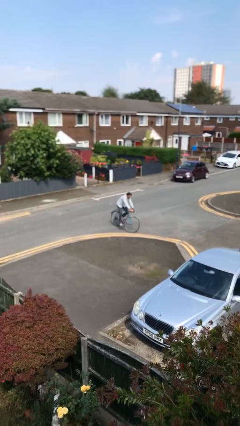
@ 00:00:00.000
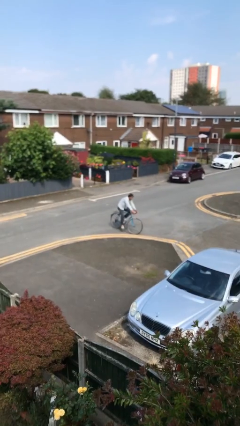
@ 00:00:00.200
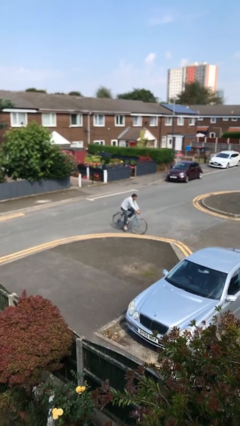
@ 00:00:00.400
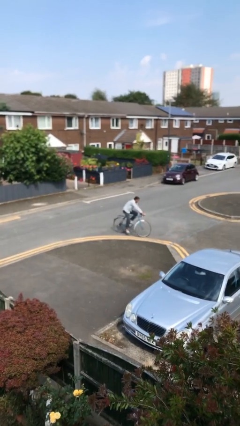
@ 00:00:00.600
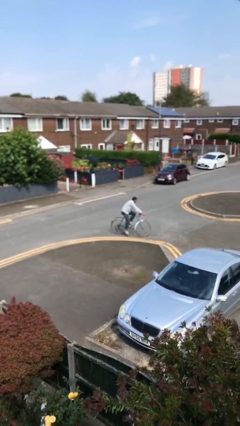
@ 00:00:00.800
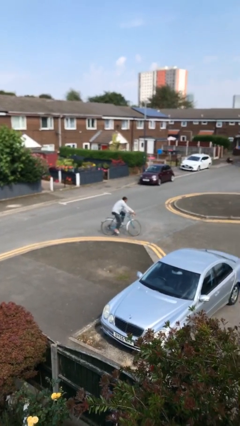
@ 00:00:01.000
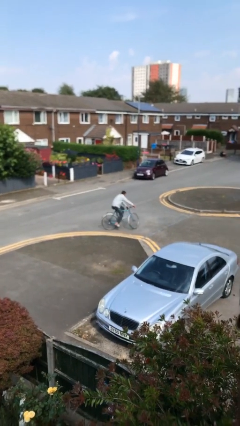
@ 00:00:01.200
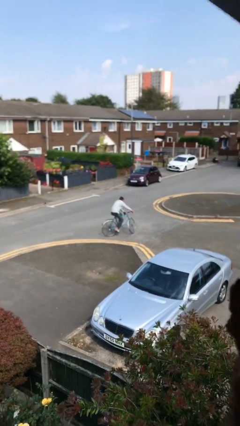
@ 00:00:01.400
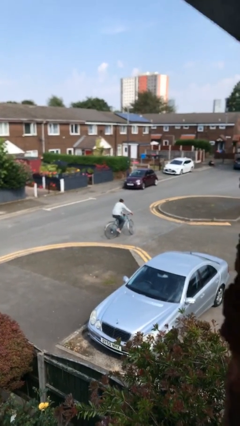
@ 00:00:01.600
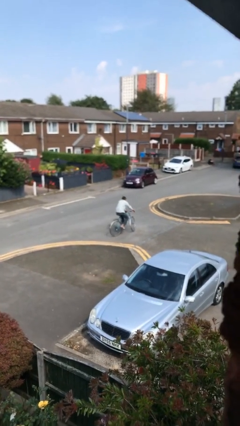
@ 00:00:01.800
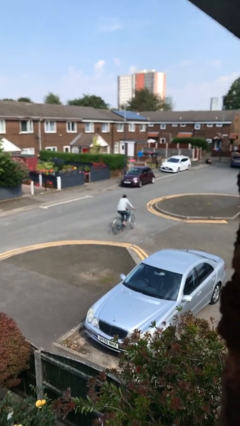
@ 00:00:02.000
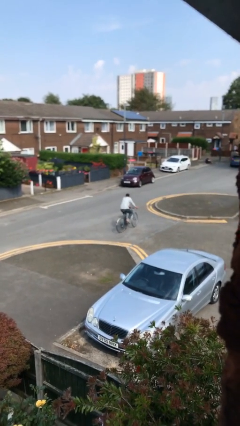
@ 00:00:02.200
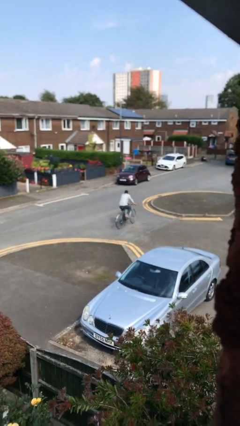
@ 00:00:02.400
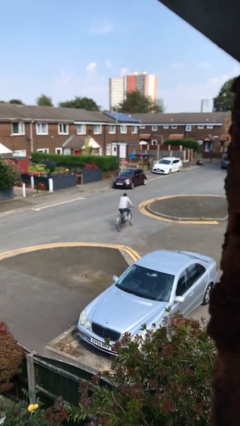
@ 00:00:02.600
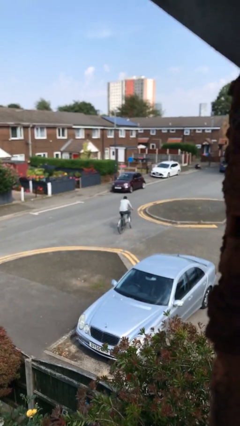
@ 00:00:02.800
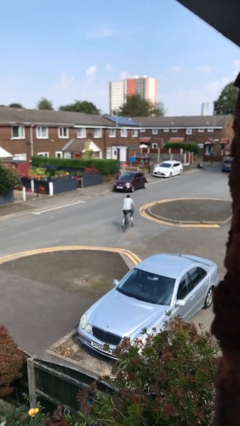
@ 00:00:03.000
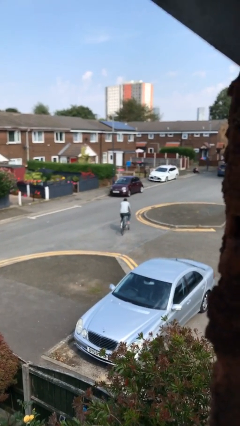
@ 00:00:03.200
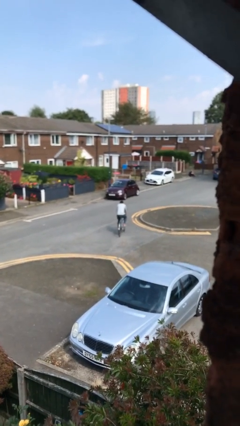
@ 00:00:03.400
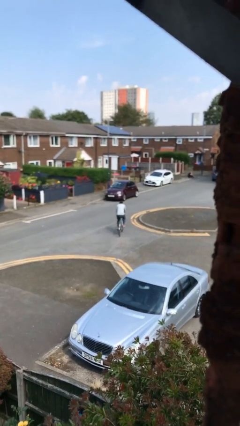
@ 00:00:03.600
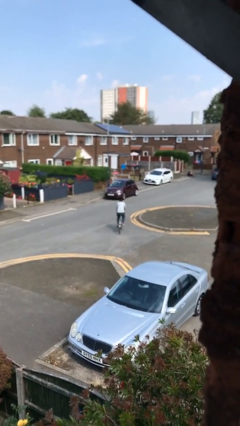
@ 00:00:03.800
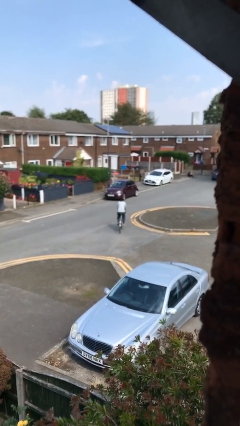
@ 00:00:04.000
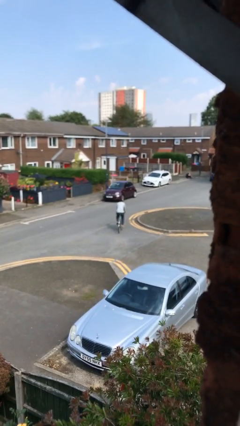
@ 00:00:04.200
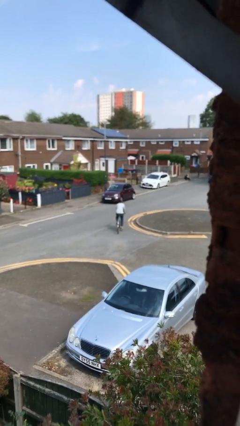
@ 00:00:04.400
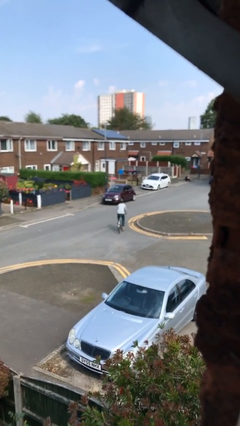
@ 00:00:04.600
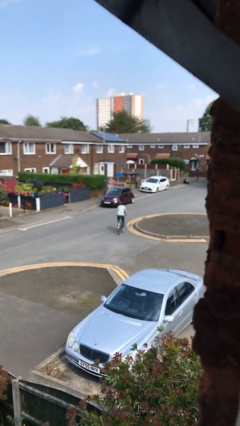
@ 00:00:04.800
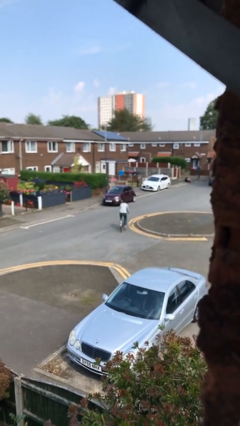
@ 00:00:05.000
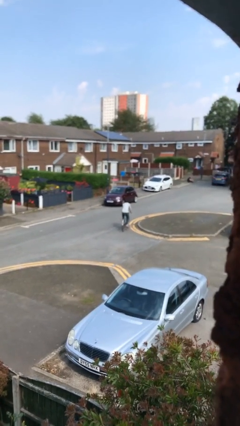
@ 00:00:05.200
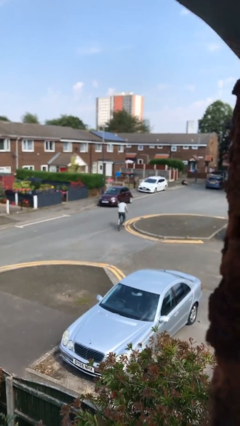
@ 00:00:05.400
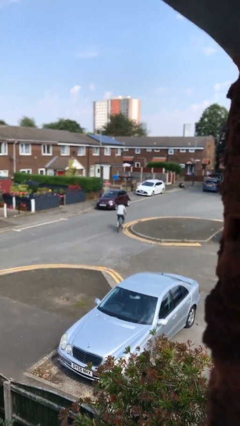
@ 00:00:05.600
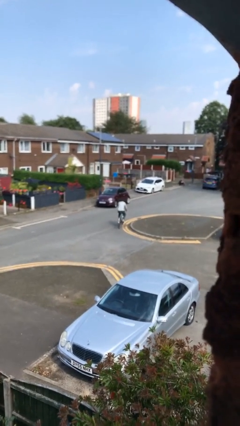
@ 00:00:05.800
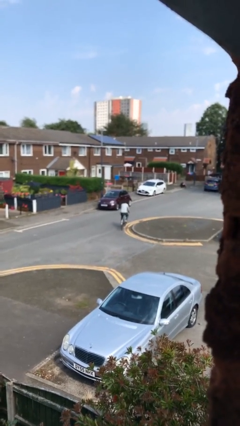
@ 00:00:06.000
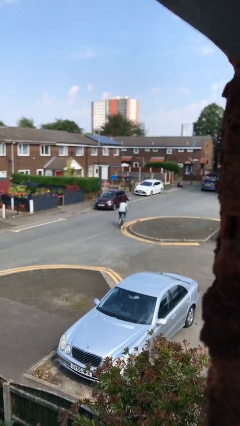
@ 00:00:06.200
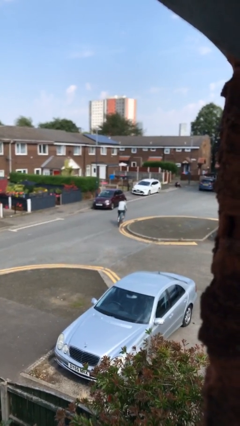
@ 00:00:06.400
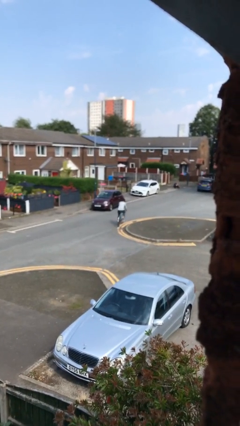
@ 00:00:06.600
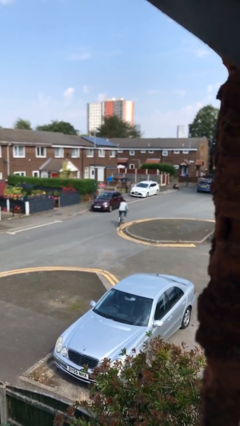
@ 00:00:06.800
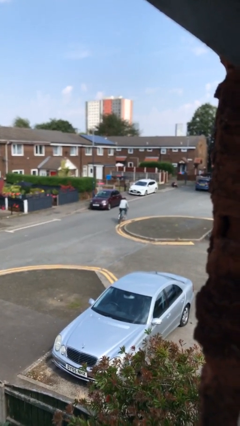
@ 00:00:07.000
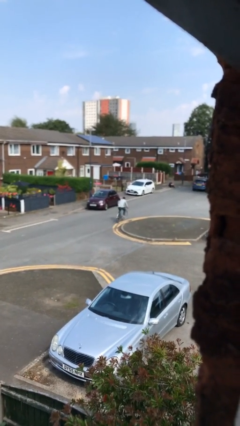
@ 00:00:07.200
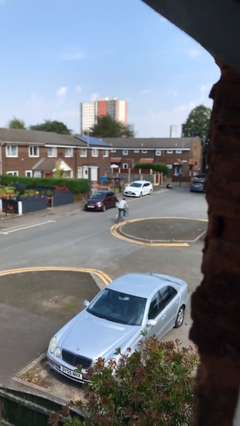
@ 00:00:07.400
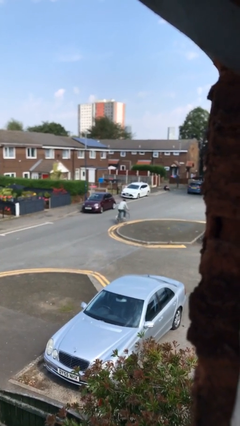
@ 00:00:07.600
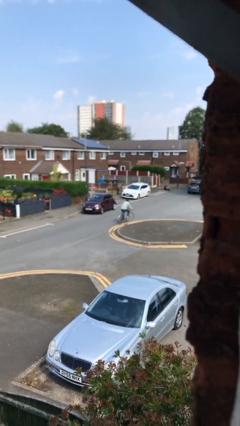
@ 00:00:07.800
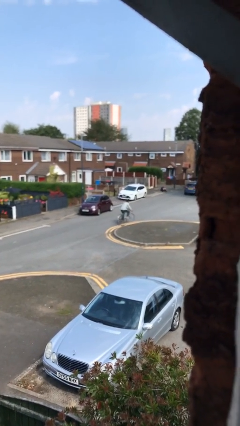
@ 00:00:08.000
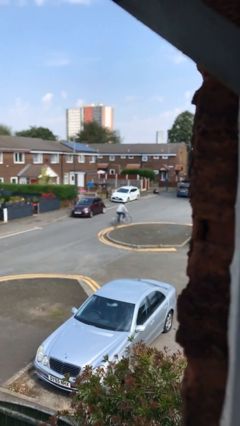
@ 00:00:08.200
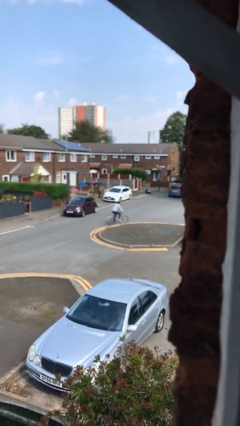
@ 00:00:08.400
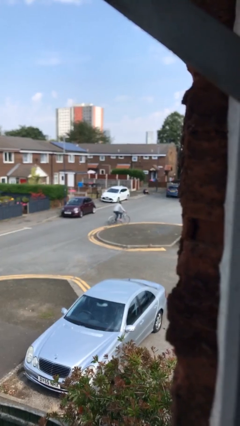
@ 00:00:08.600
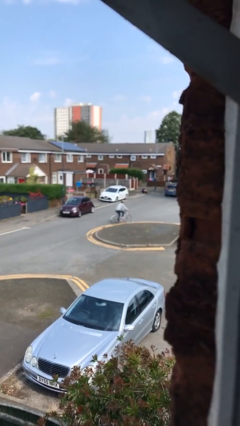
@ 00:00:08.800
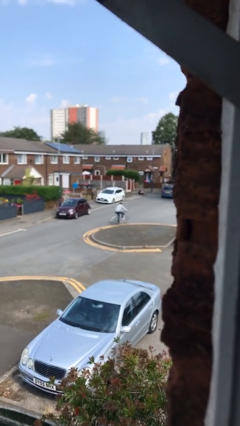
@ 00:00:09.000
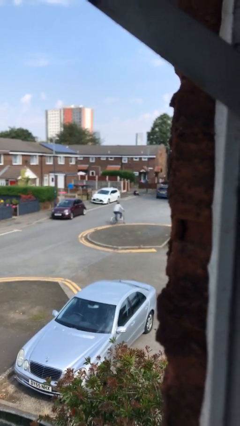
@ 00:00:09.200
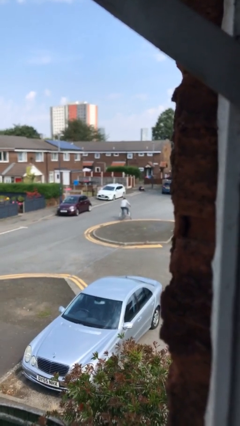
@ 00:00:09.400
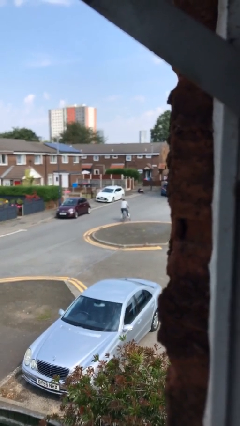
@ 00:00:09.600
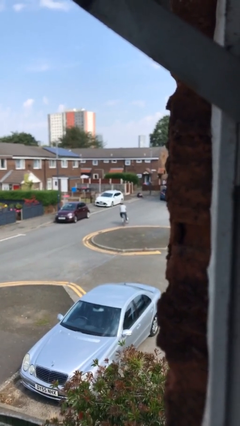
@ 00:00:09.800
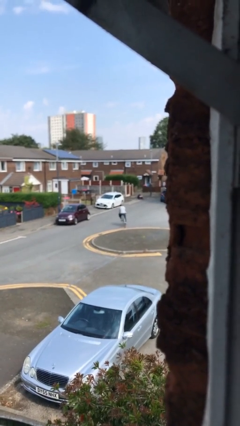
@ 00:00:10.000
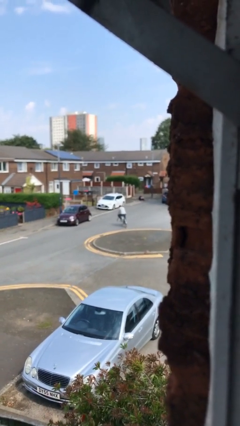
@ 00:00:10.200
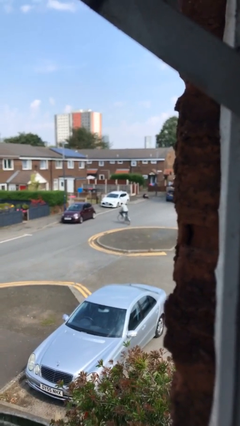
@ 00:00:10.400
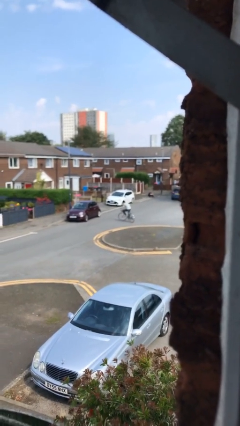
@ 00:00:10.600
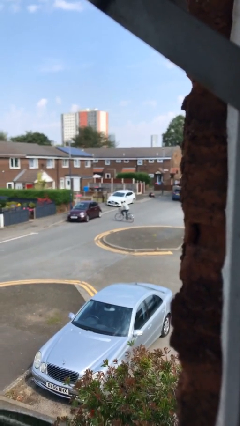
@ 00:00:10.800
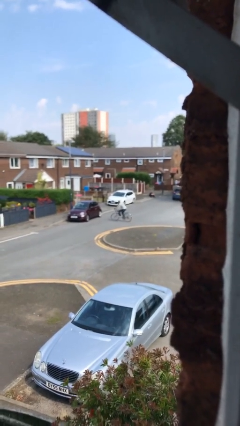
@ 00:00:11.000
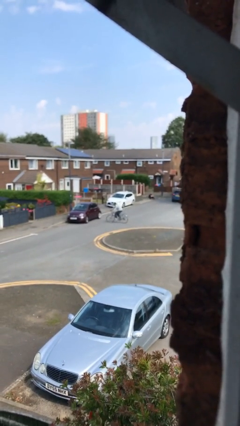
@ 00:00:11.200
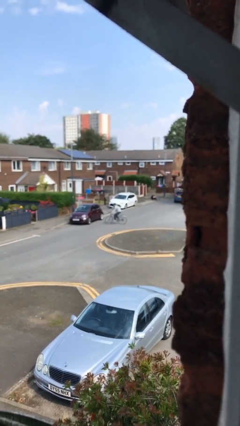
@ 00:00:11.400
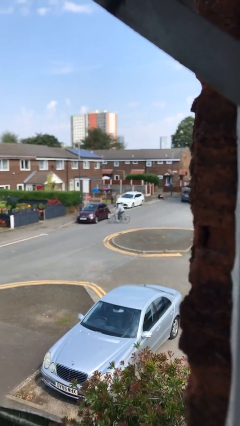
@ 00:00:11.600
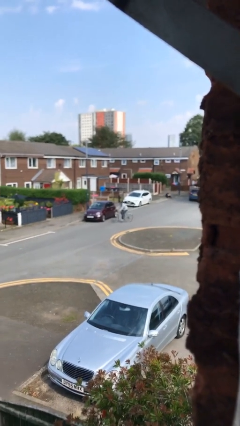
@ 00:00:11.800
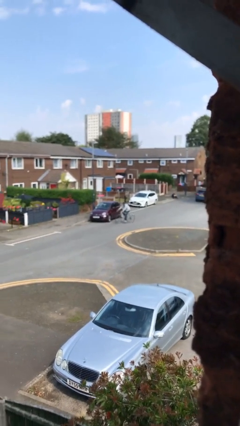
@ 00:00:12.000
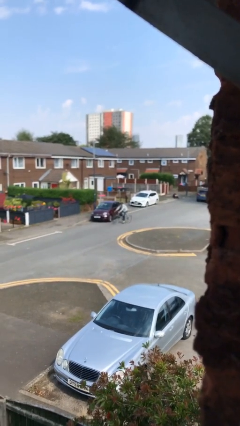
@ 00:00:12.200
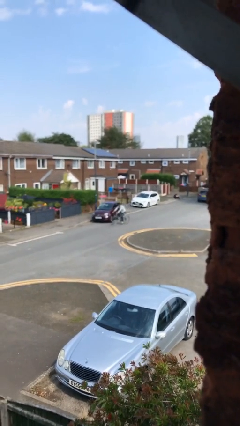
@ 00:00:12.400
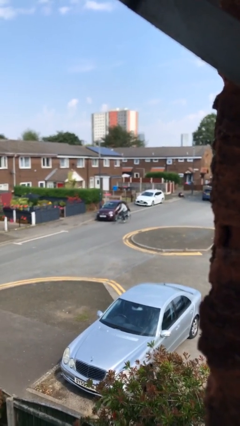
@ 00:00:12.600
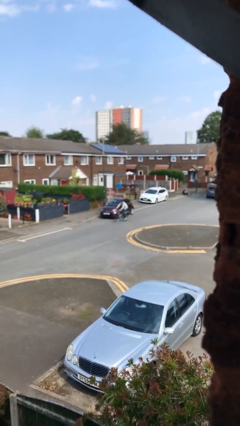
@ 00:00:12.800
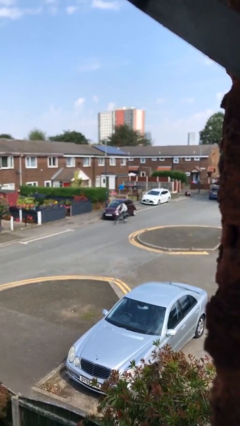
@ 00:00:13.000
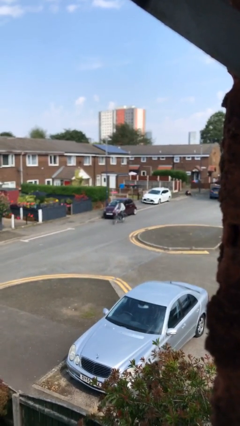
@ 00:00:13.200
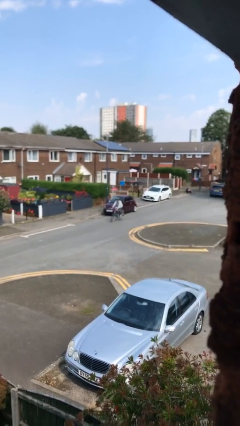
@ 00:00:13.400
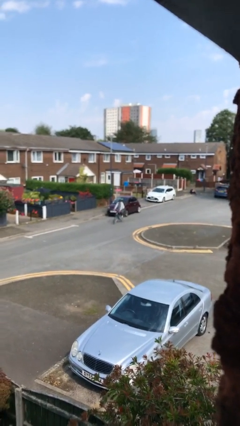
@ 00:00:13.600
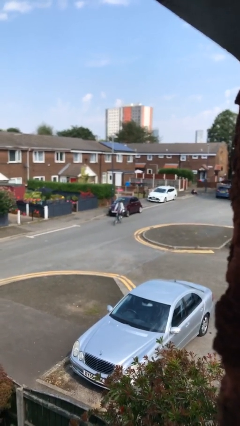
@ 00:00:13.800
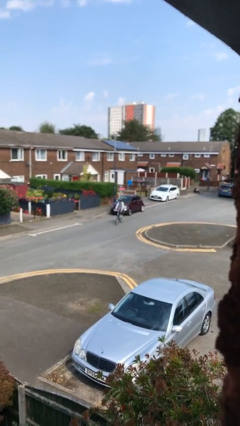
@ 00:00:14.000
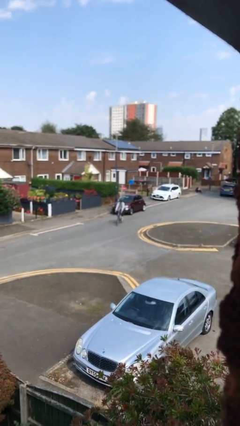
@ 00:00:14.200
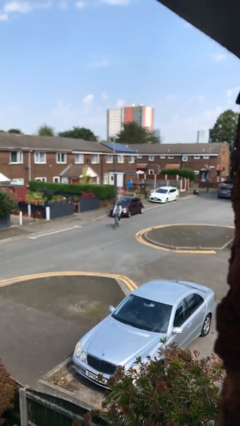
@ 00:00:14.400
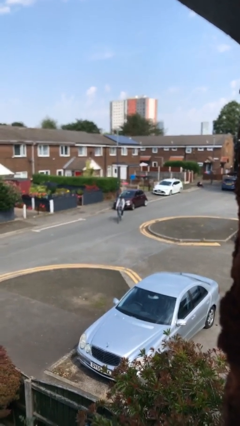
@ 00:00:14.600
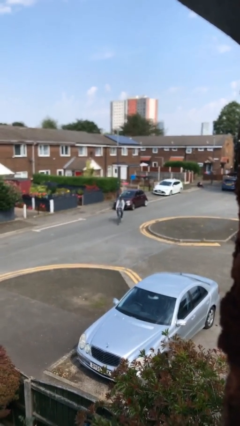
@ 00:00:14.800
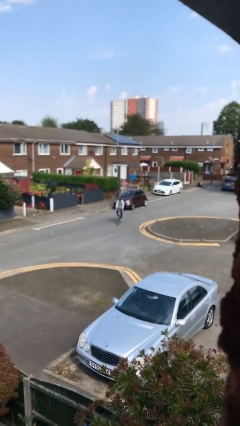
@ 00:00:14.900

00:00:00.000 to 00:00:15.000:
person rides bicycle

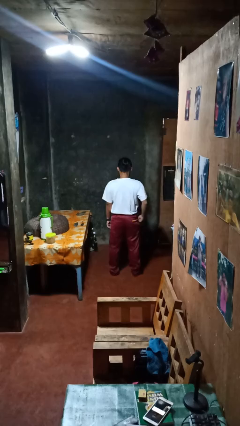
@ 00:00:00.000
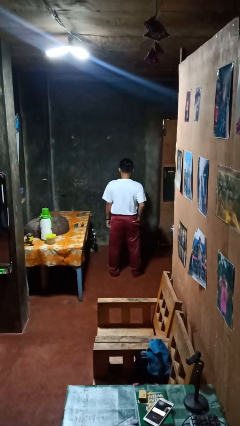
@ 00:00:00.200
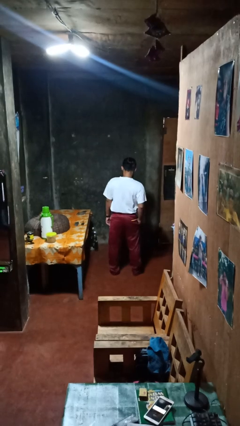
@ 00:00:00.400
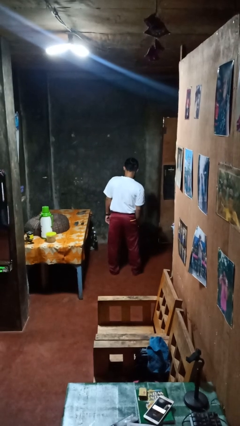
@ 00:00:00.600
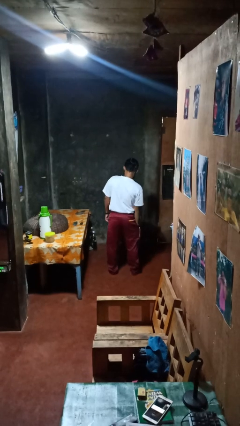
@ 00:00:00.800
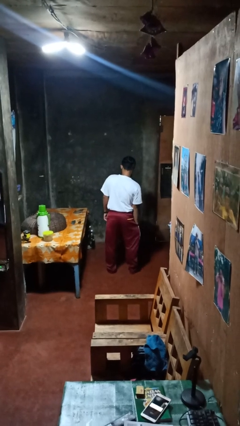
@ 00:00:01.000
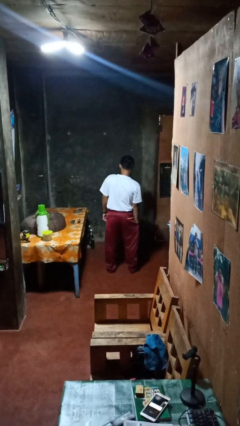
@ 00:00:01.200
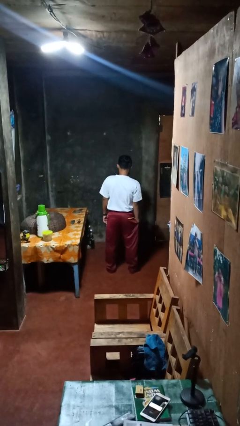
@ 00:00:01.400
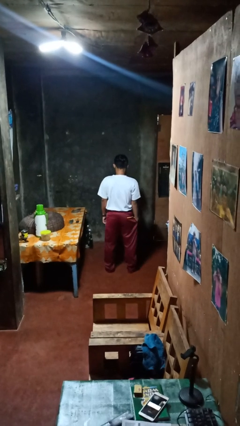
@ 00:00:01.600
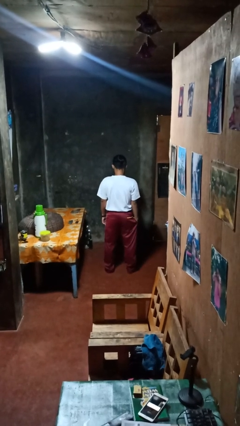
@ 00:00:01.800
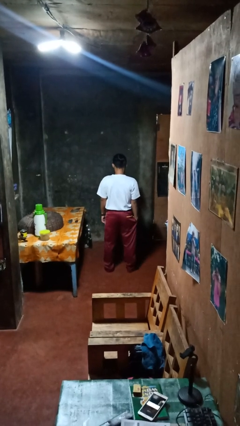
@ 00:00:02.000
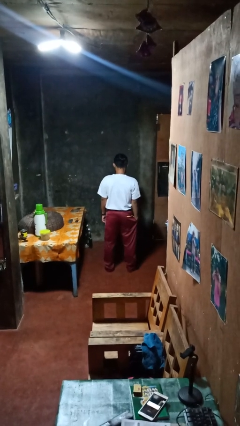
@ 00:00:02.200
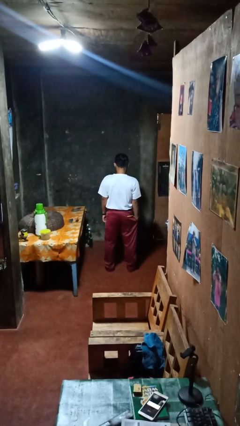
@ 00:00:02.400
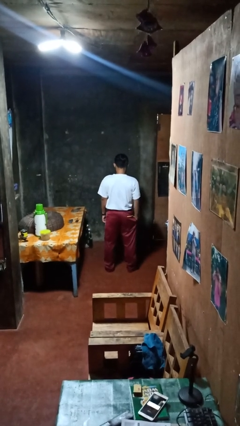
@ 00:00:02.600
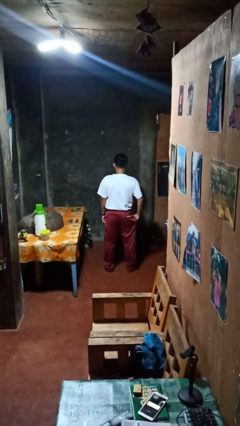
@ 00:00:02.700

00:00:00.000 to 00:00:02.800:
person puts hands in back pockets
